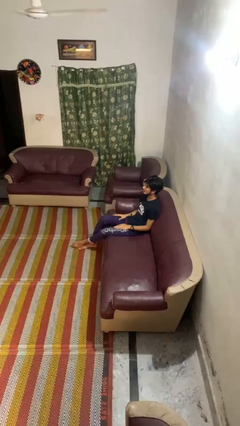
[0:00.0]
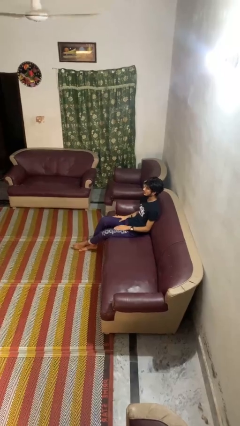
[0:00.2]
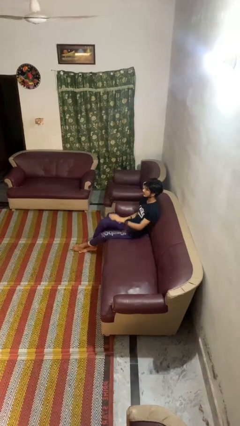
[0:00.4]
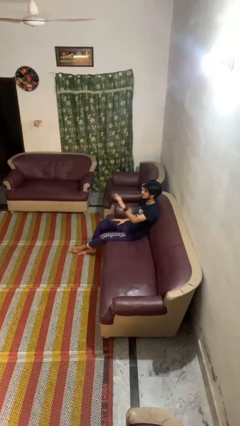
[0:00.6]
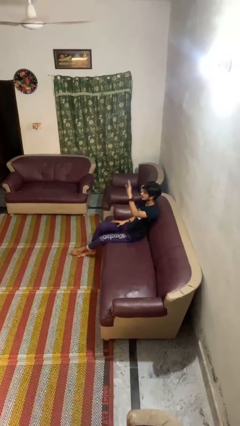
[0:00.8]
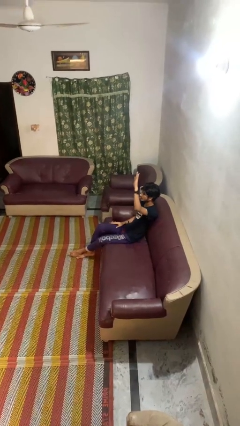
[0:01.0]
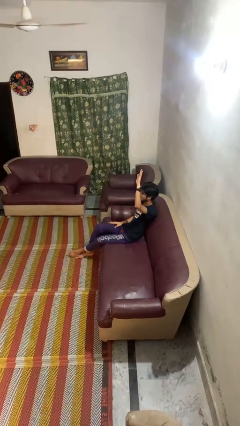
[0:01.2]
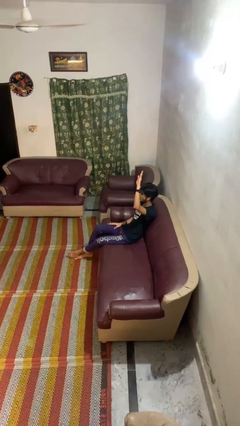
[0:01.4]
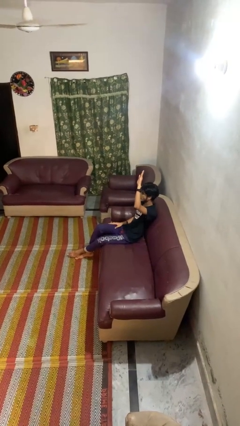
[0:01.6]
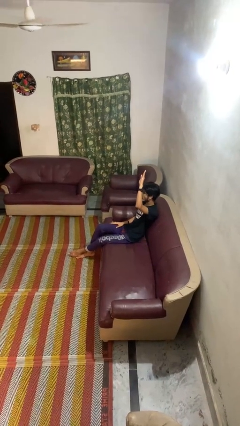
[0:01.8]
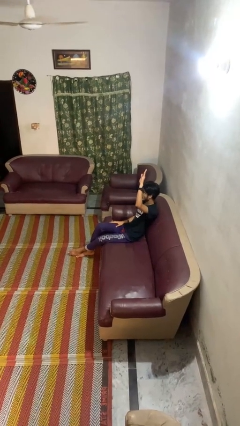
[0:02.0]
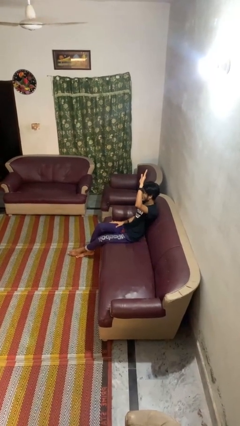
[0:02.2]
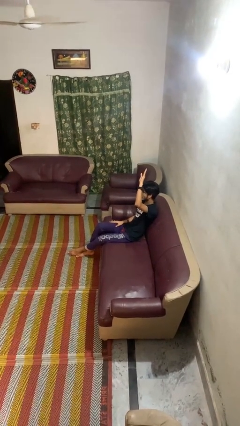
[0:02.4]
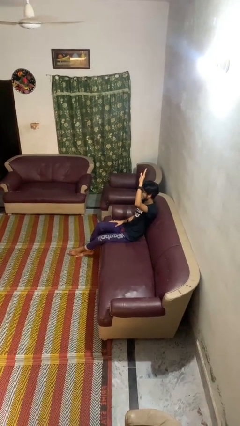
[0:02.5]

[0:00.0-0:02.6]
person gestures raise hand

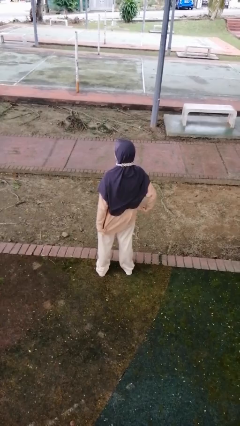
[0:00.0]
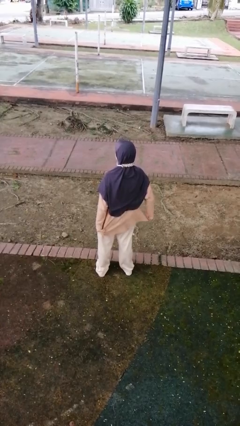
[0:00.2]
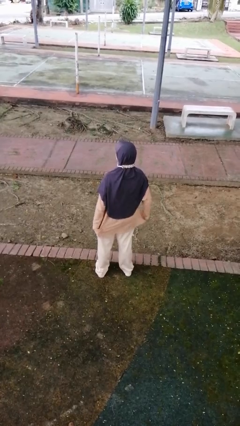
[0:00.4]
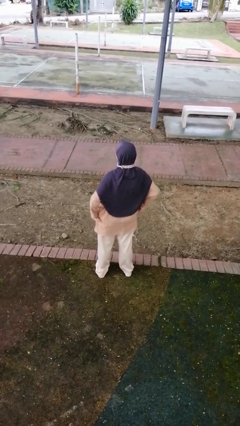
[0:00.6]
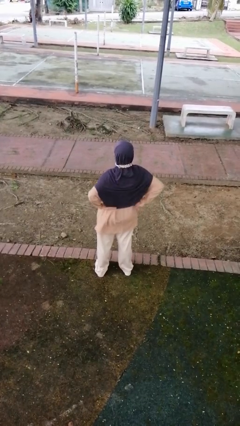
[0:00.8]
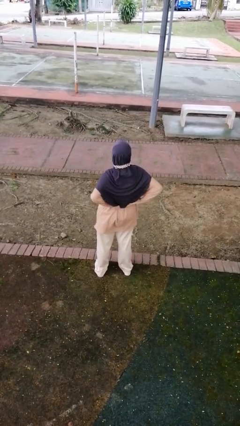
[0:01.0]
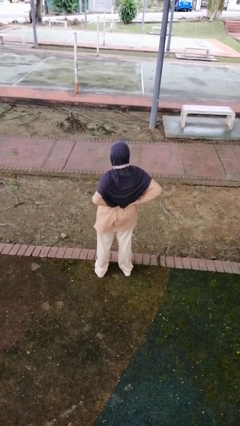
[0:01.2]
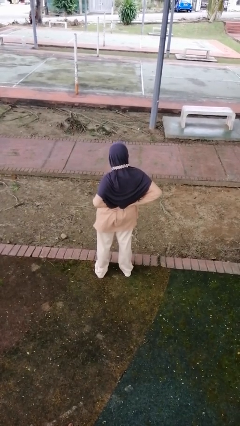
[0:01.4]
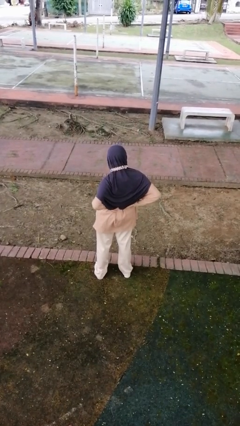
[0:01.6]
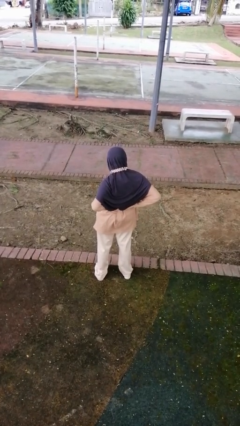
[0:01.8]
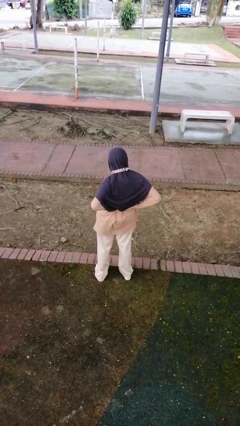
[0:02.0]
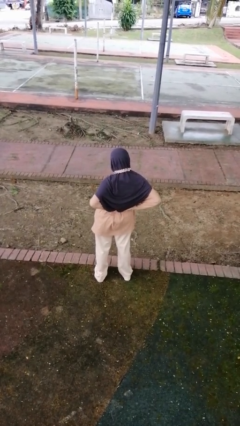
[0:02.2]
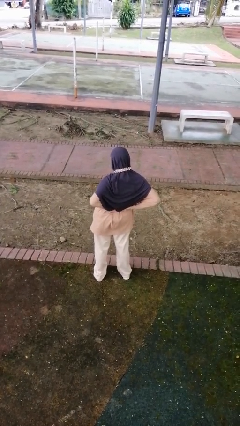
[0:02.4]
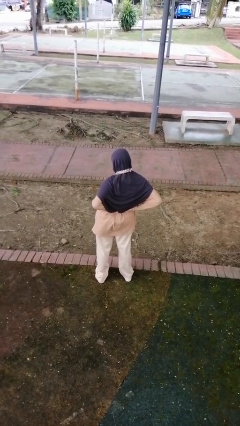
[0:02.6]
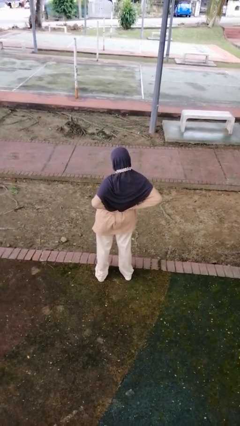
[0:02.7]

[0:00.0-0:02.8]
person stretches back

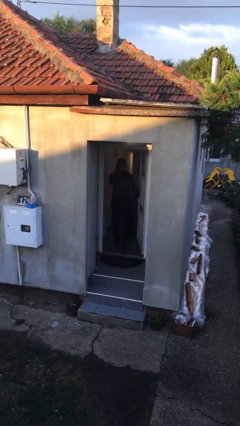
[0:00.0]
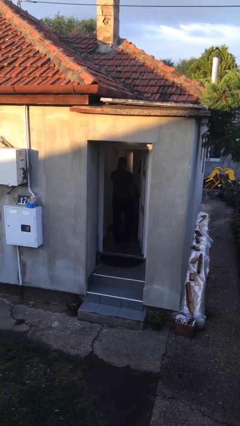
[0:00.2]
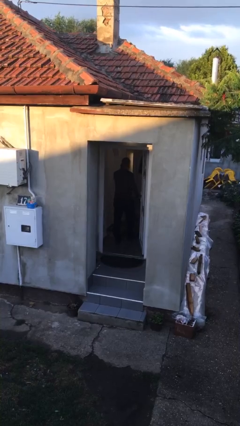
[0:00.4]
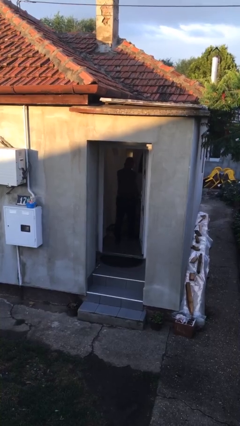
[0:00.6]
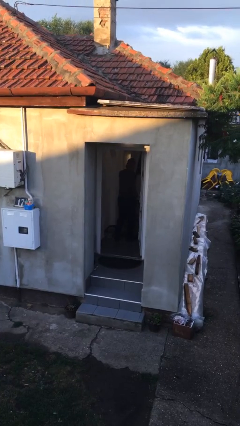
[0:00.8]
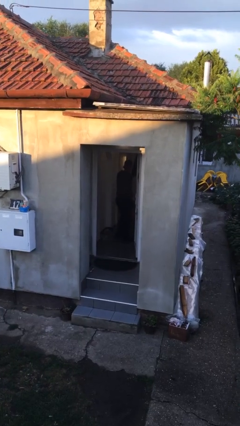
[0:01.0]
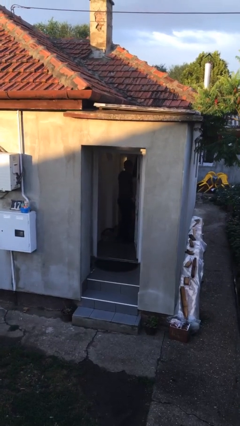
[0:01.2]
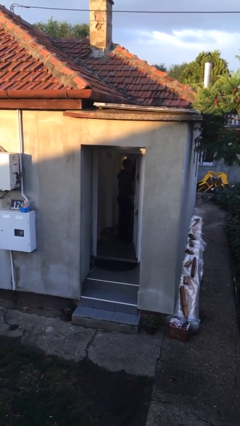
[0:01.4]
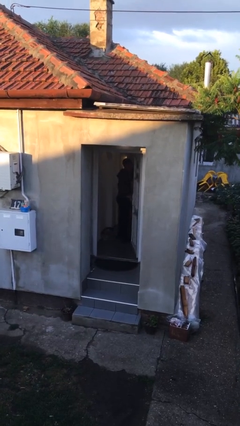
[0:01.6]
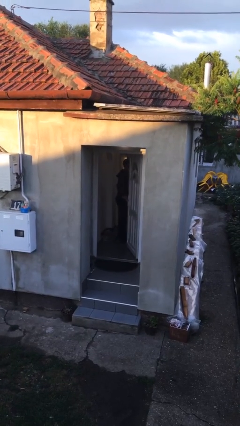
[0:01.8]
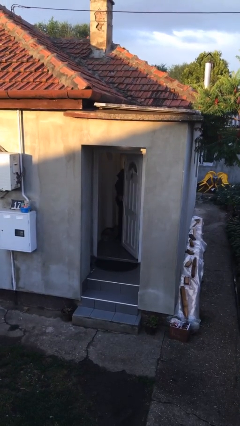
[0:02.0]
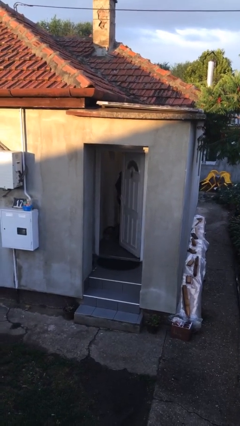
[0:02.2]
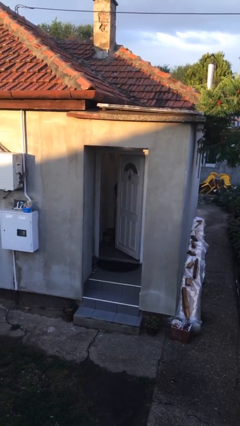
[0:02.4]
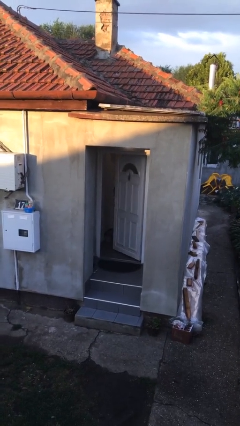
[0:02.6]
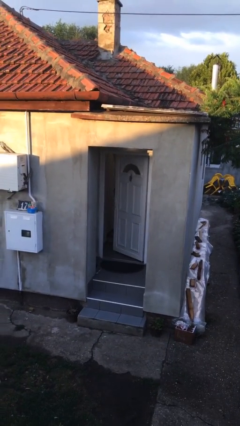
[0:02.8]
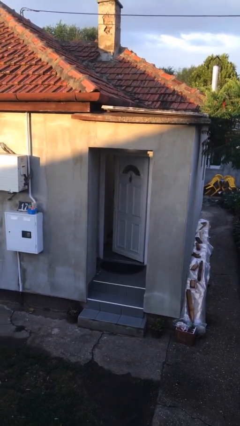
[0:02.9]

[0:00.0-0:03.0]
person exits scene through structure

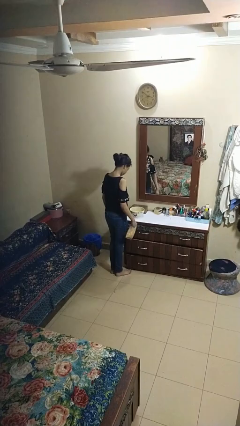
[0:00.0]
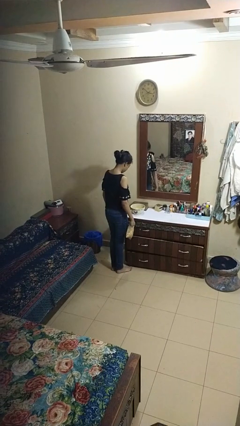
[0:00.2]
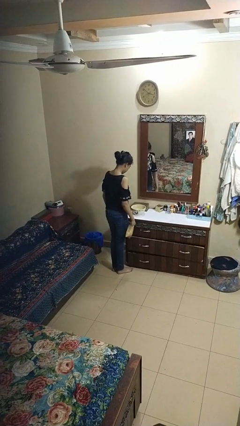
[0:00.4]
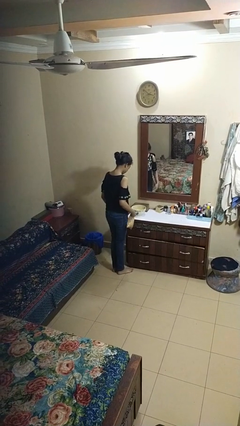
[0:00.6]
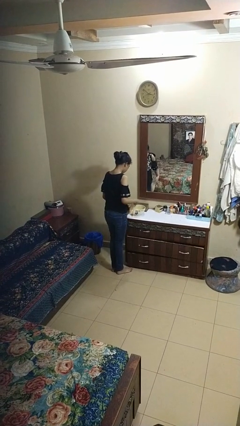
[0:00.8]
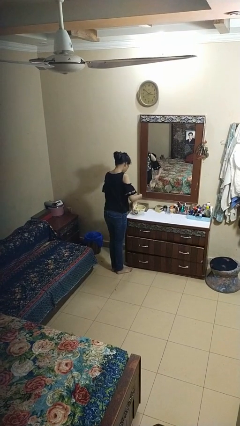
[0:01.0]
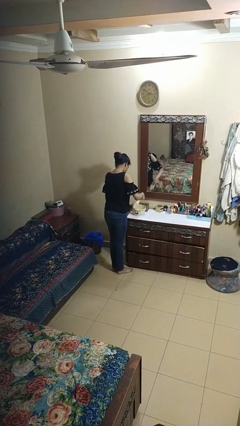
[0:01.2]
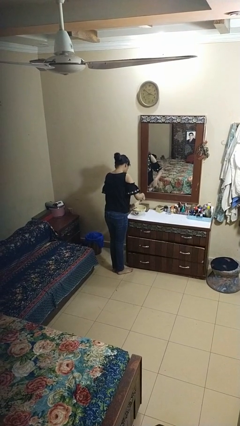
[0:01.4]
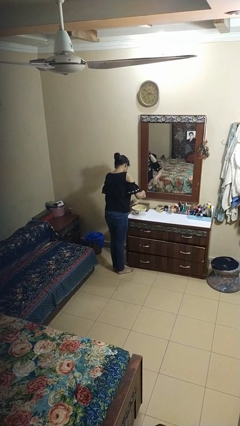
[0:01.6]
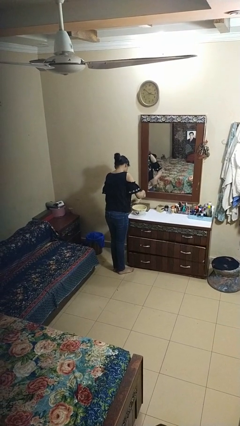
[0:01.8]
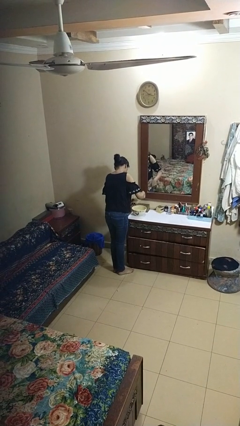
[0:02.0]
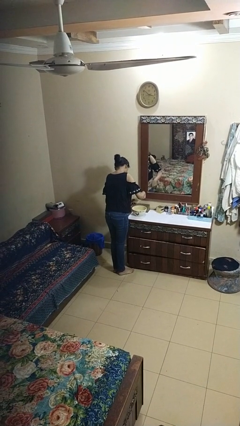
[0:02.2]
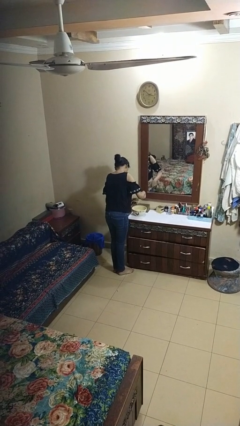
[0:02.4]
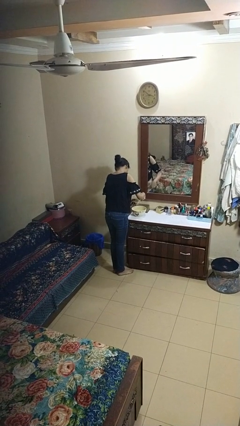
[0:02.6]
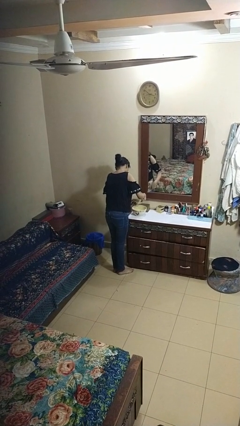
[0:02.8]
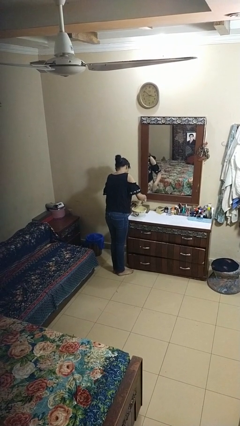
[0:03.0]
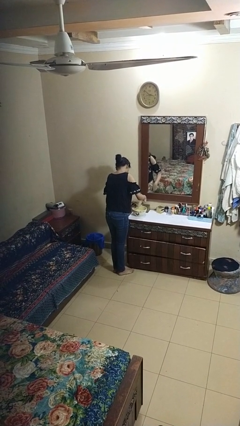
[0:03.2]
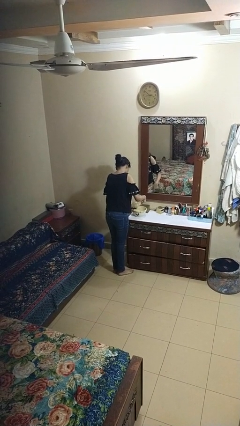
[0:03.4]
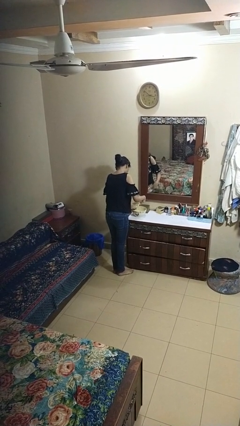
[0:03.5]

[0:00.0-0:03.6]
person pours into bowl

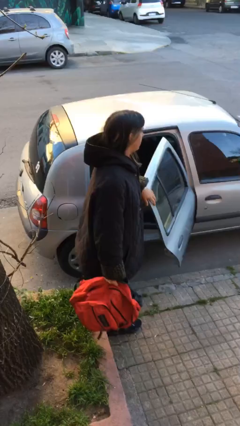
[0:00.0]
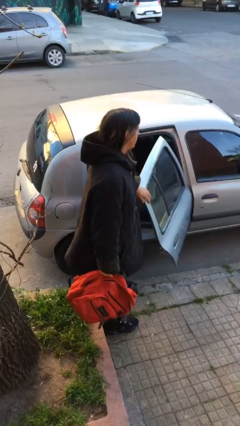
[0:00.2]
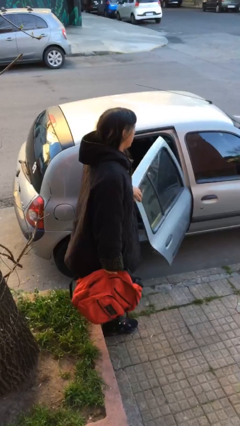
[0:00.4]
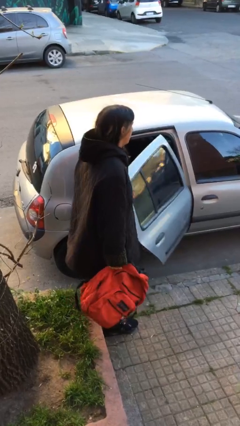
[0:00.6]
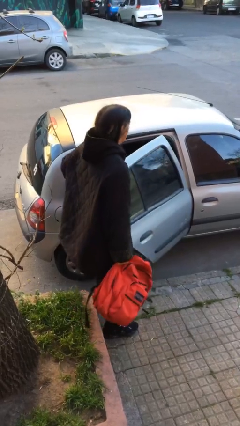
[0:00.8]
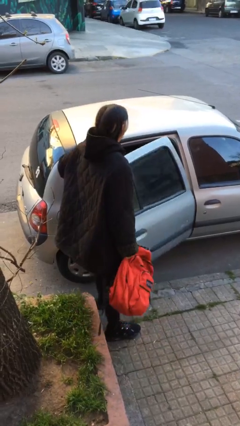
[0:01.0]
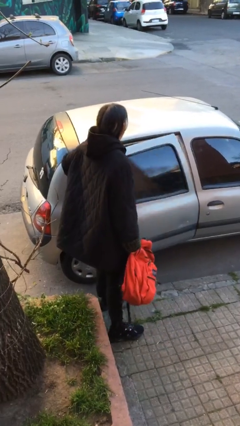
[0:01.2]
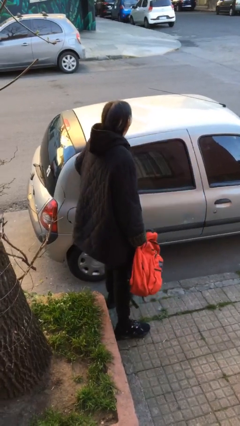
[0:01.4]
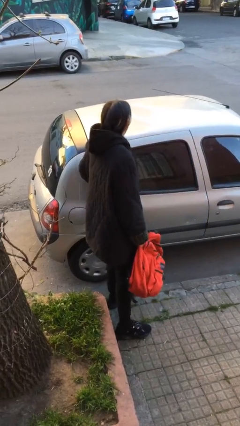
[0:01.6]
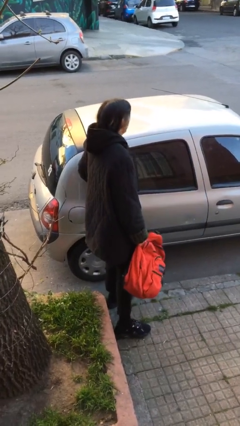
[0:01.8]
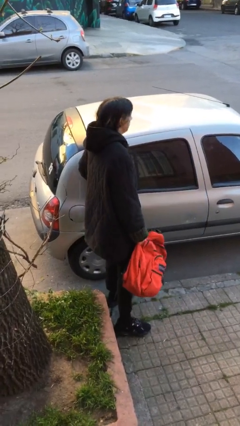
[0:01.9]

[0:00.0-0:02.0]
person closes car door

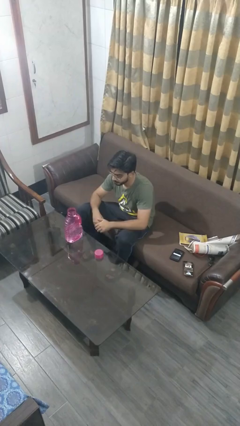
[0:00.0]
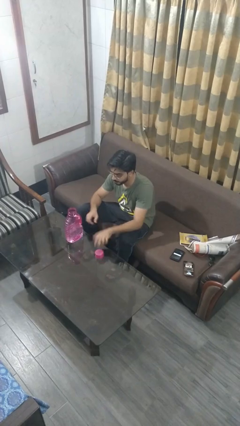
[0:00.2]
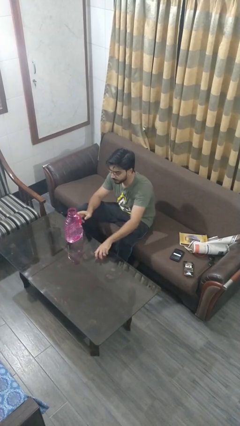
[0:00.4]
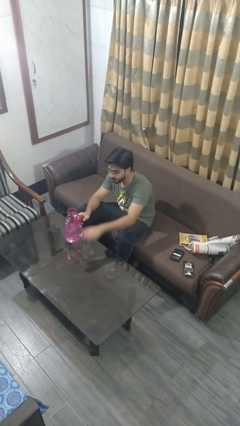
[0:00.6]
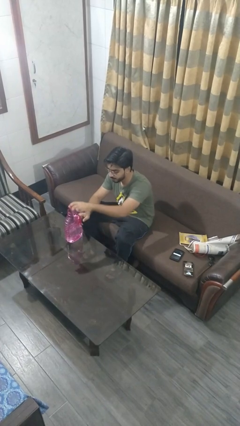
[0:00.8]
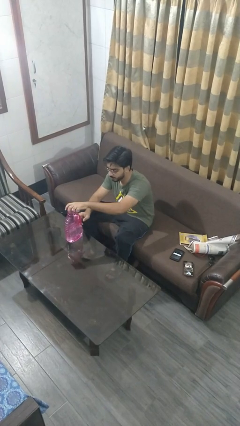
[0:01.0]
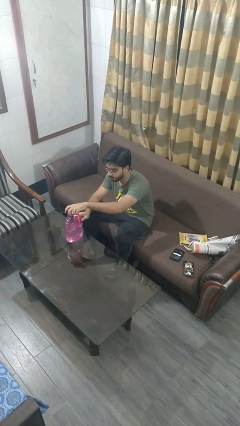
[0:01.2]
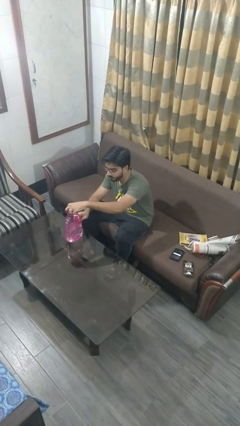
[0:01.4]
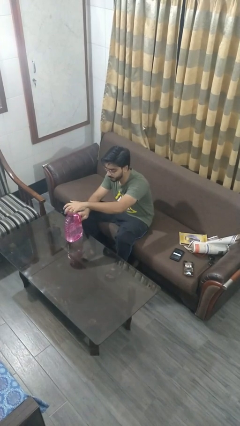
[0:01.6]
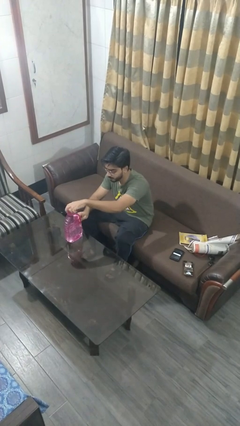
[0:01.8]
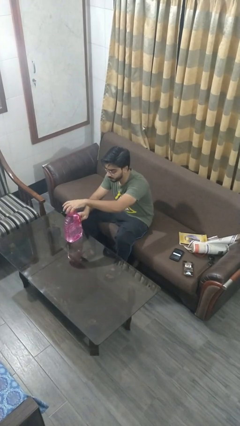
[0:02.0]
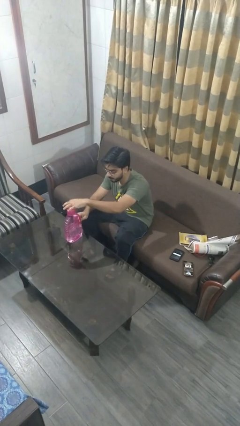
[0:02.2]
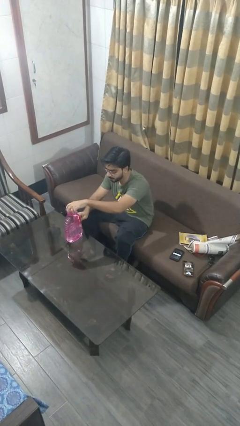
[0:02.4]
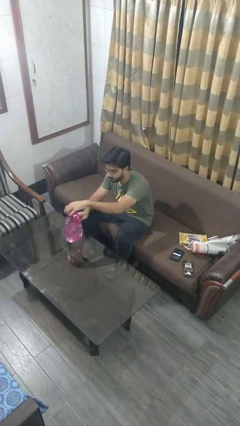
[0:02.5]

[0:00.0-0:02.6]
person screws lid to bottle

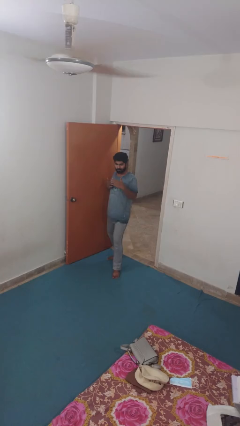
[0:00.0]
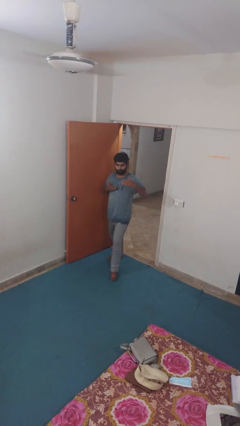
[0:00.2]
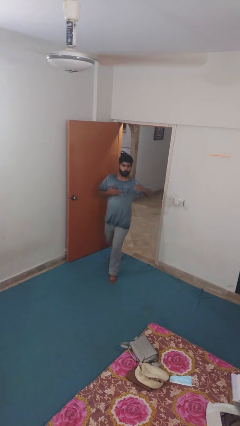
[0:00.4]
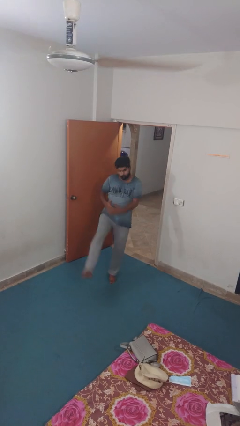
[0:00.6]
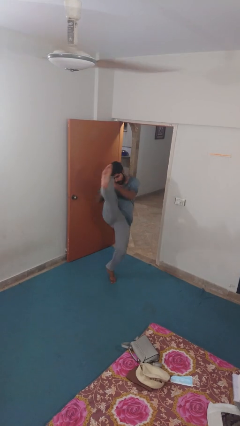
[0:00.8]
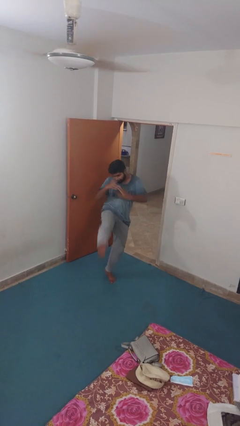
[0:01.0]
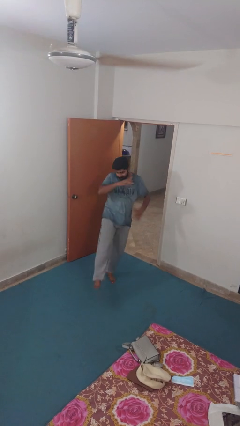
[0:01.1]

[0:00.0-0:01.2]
person karate kicks
